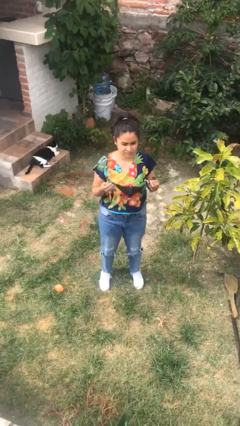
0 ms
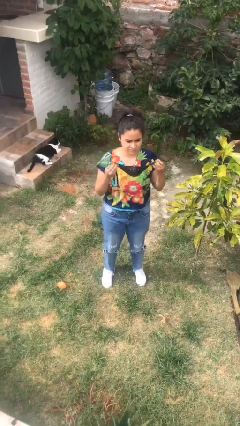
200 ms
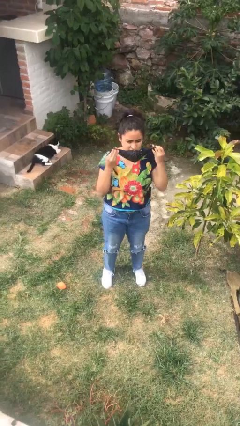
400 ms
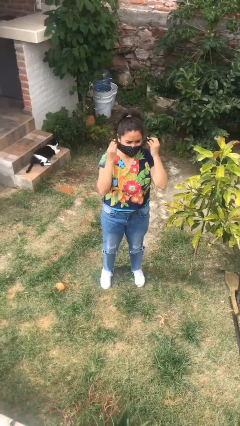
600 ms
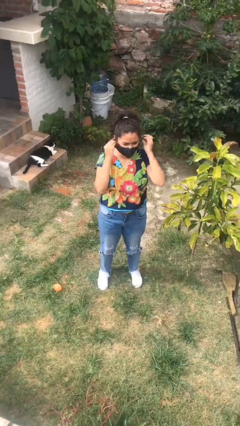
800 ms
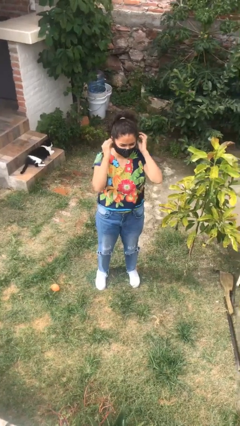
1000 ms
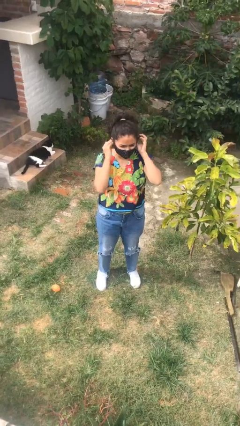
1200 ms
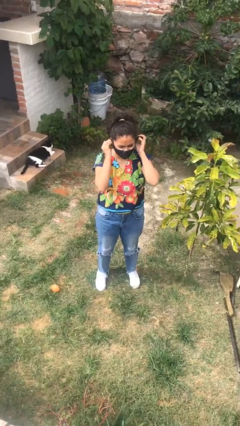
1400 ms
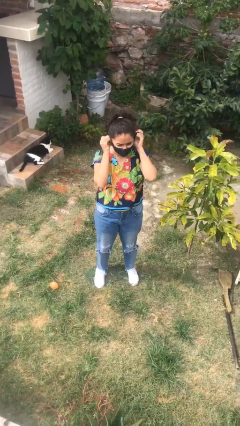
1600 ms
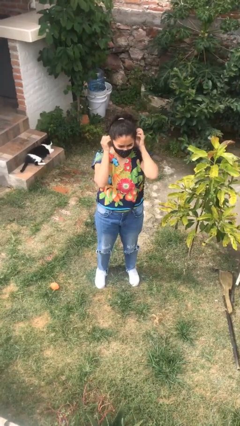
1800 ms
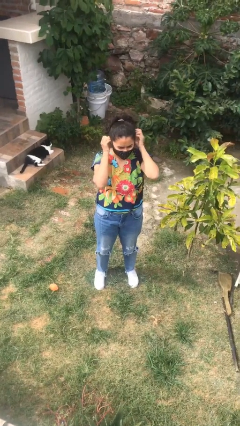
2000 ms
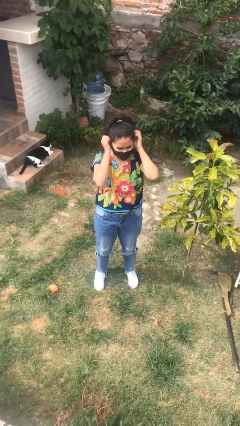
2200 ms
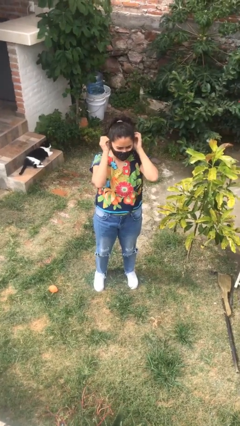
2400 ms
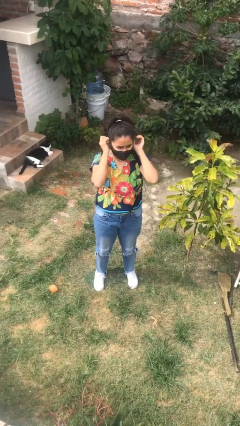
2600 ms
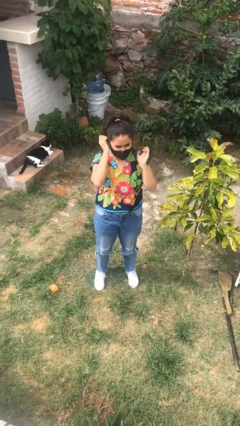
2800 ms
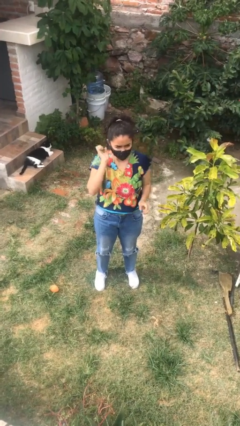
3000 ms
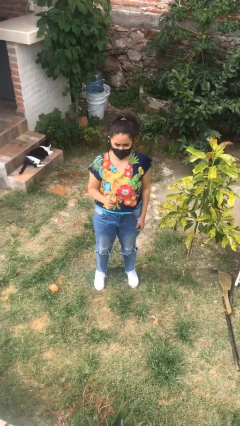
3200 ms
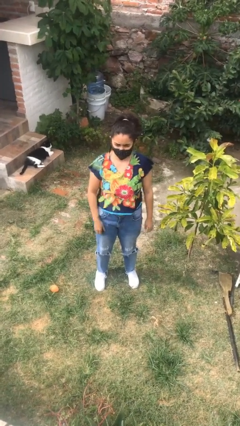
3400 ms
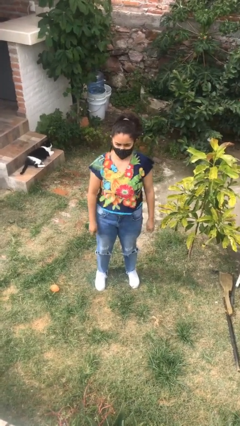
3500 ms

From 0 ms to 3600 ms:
person puts on facemask

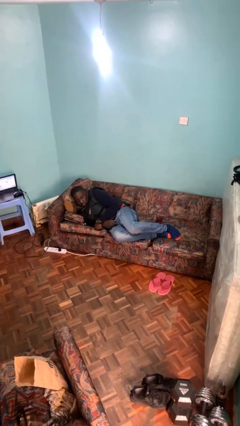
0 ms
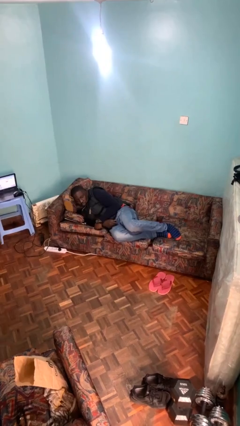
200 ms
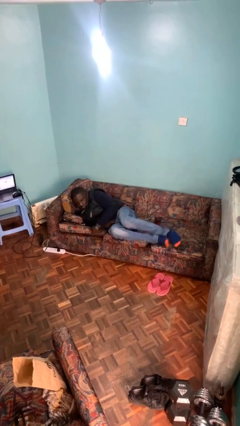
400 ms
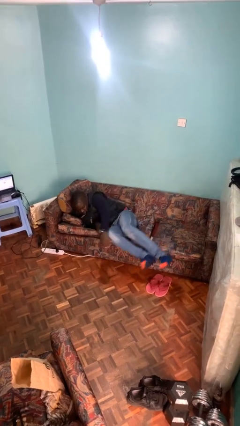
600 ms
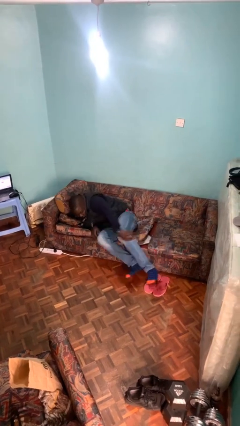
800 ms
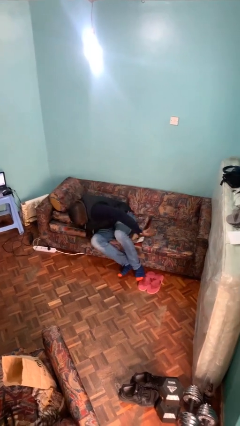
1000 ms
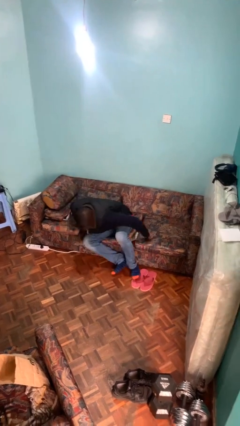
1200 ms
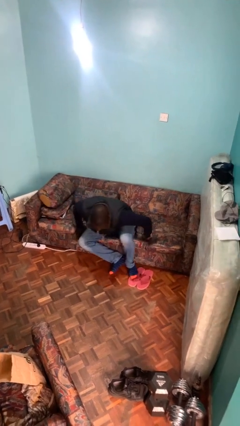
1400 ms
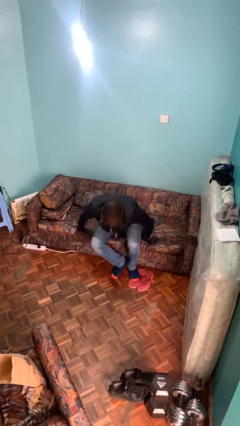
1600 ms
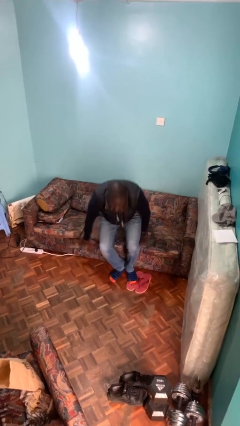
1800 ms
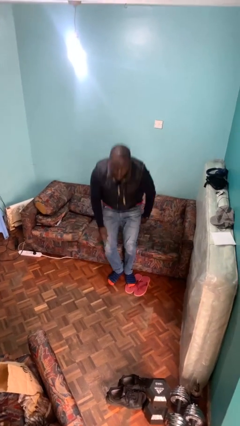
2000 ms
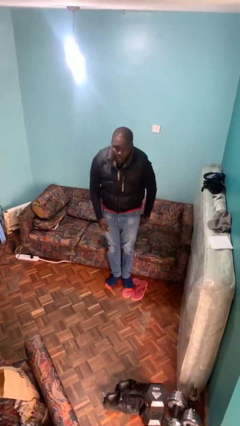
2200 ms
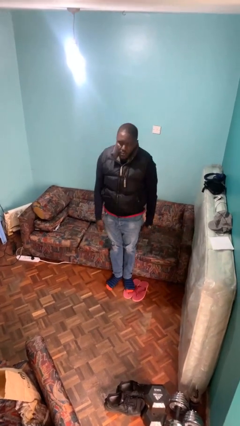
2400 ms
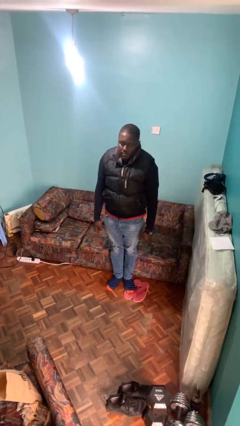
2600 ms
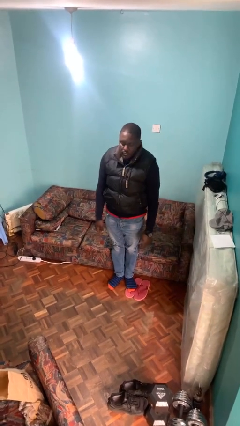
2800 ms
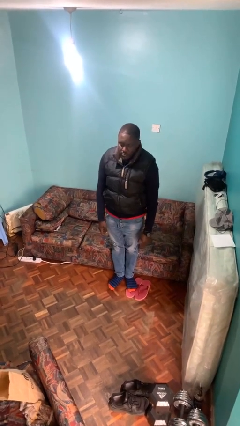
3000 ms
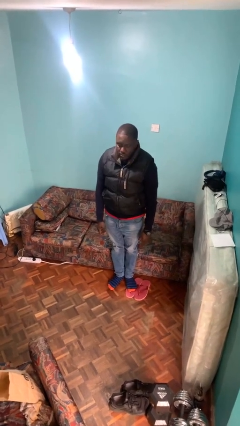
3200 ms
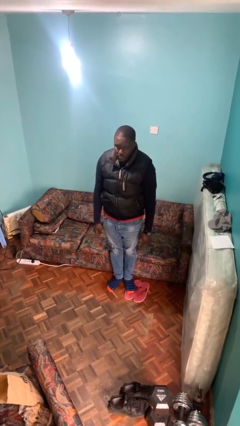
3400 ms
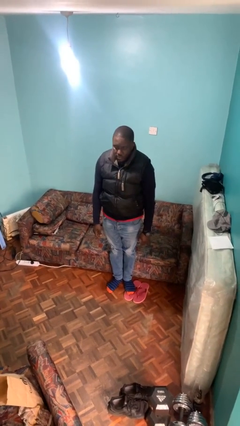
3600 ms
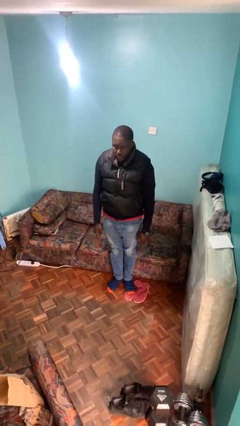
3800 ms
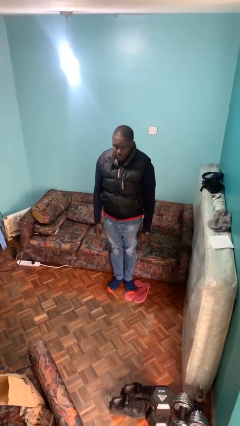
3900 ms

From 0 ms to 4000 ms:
person stands up

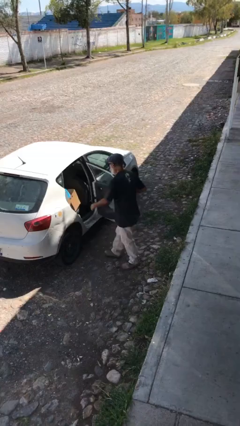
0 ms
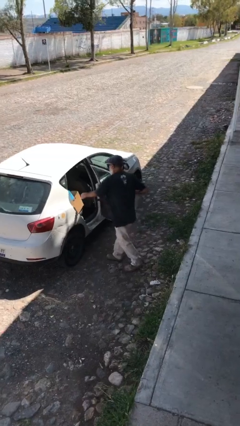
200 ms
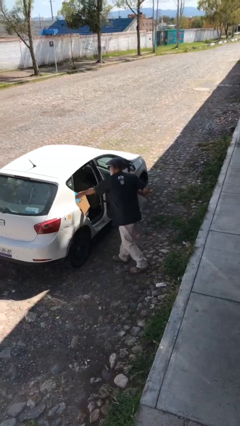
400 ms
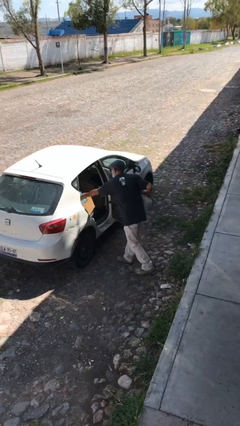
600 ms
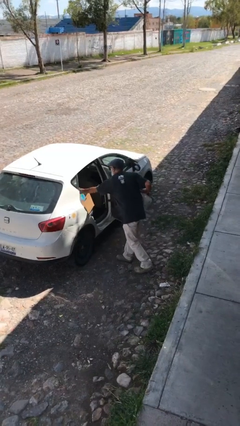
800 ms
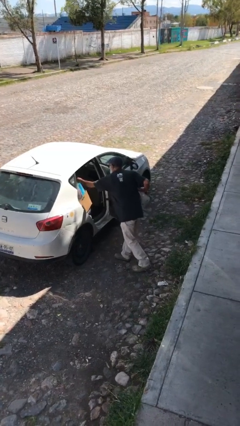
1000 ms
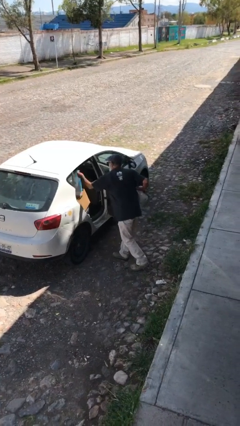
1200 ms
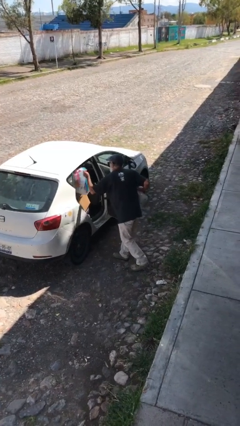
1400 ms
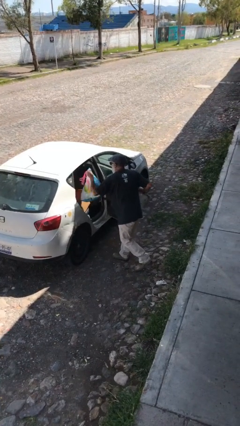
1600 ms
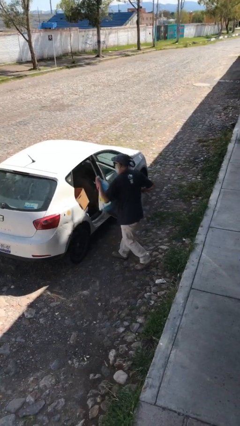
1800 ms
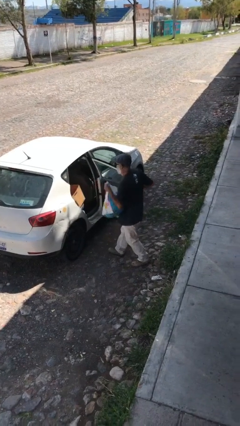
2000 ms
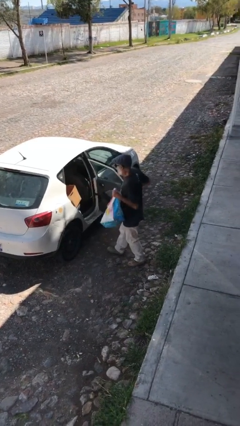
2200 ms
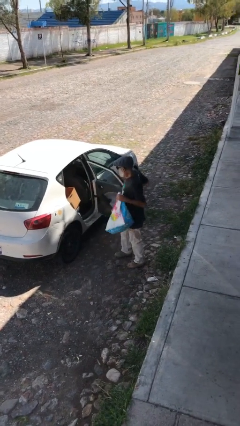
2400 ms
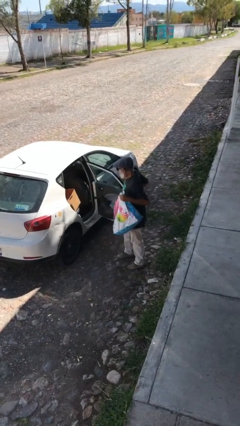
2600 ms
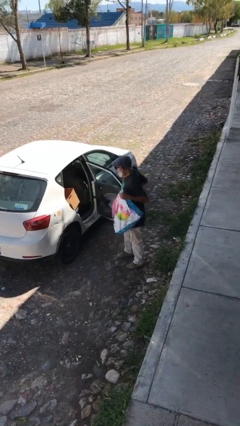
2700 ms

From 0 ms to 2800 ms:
person unloads car

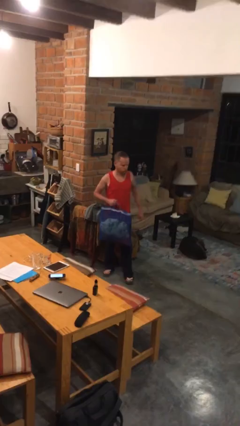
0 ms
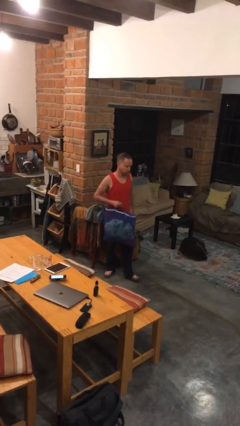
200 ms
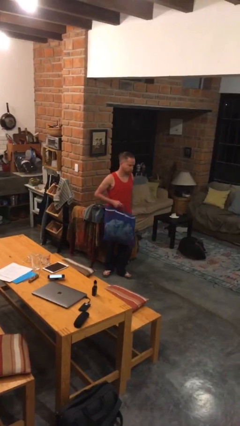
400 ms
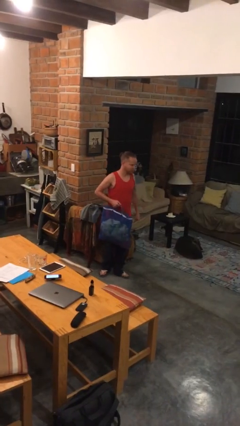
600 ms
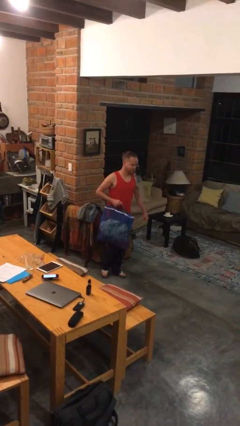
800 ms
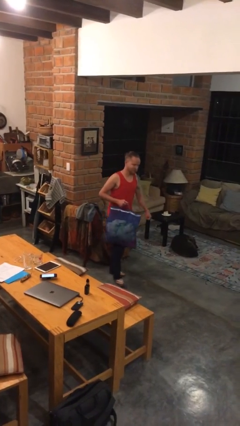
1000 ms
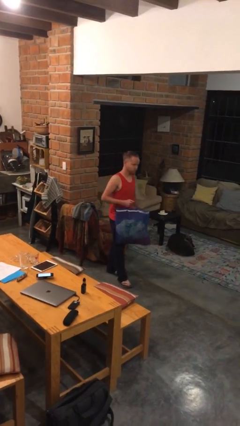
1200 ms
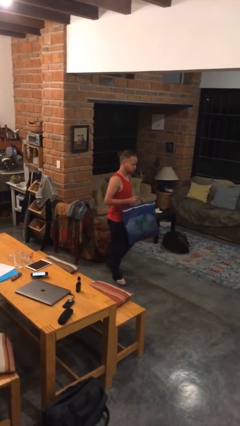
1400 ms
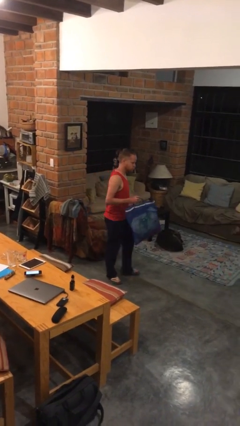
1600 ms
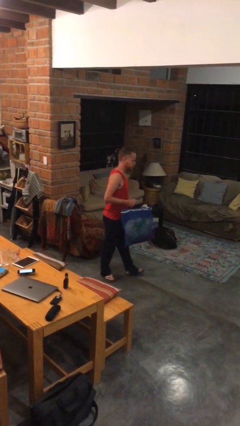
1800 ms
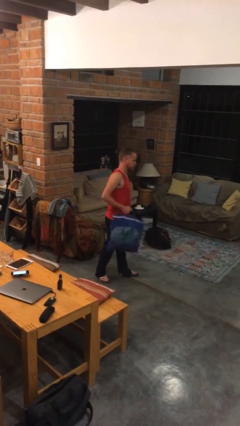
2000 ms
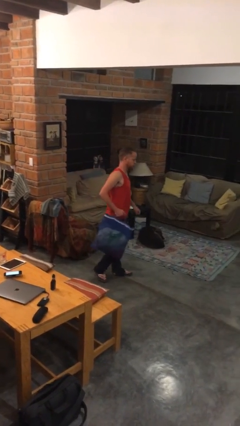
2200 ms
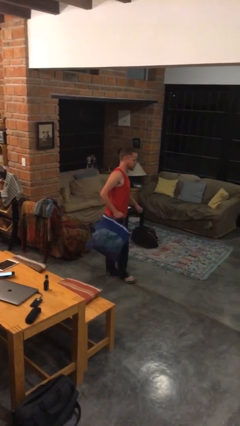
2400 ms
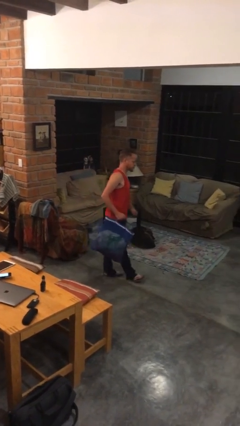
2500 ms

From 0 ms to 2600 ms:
person carries groceries

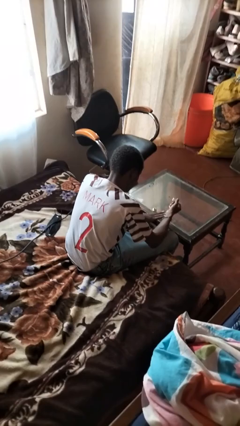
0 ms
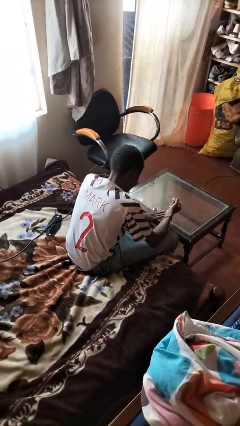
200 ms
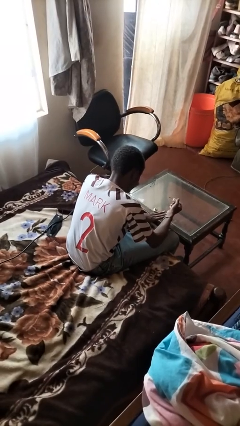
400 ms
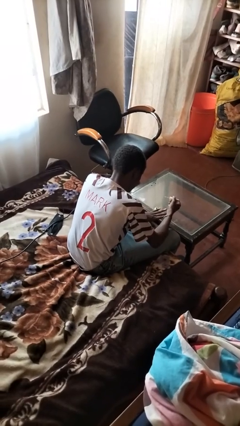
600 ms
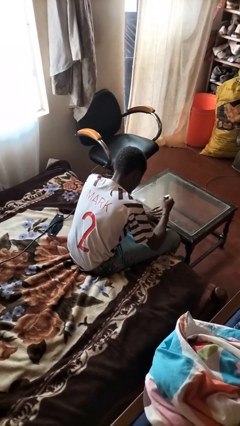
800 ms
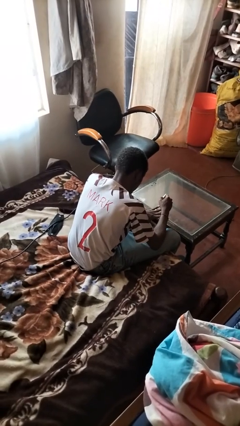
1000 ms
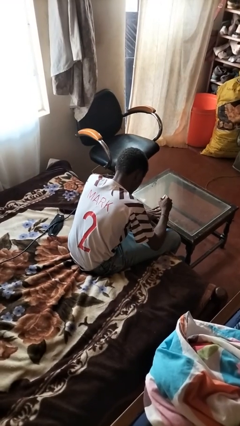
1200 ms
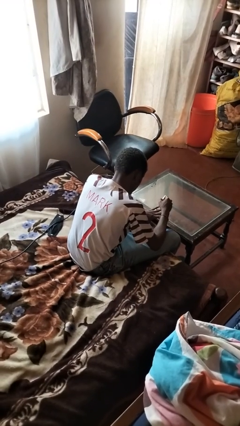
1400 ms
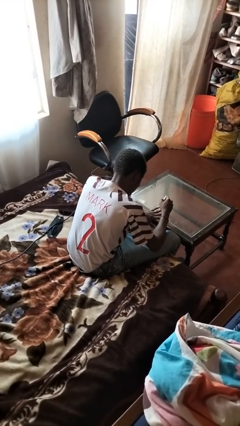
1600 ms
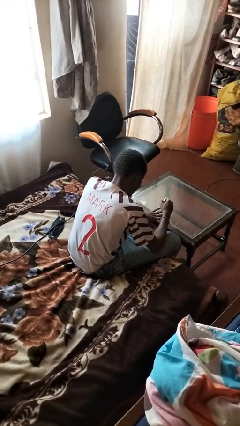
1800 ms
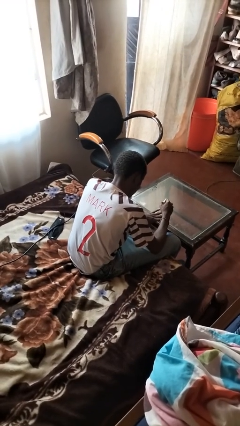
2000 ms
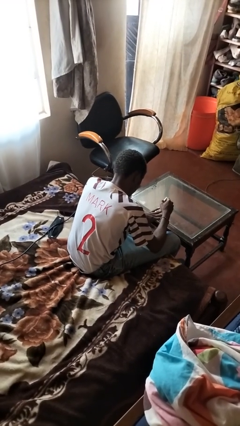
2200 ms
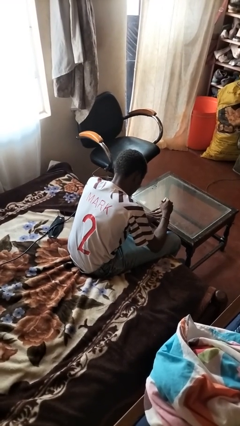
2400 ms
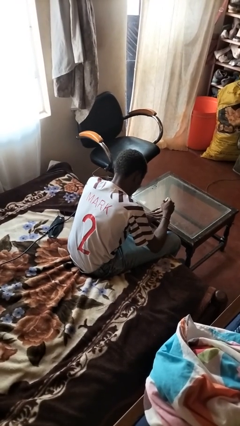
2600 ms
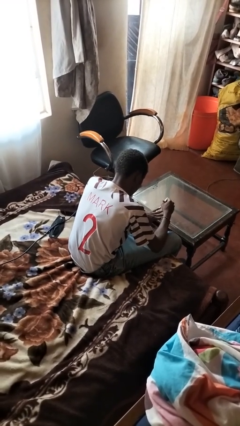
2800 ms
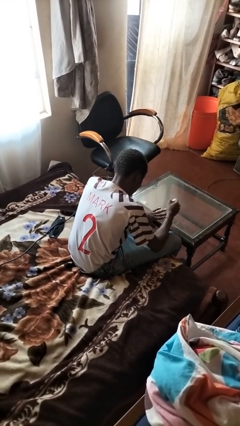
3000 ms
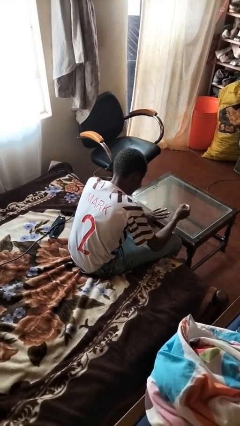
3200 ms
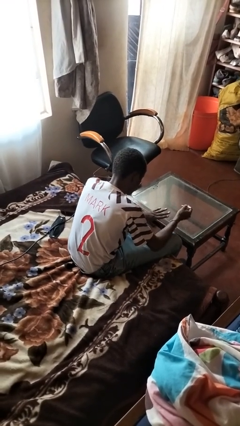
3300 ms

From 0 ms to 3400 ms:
person paints fingernails

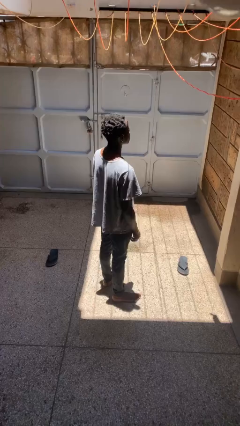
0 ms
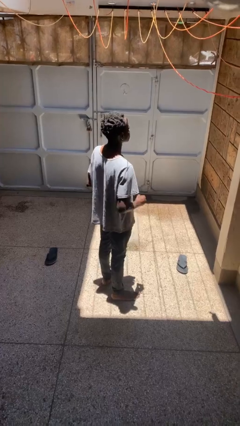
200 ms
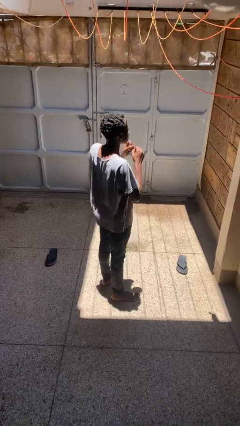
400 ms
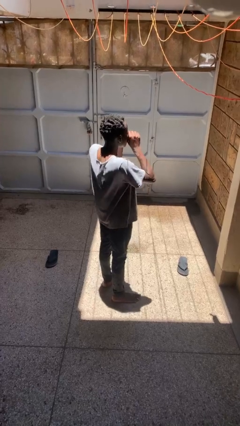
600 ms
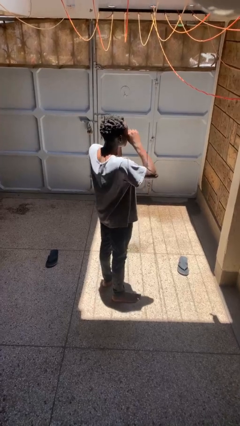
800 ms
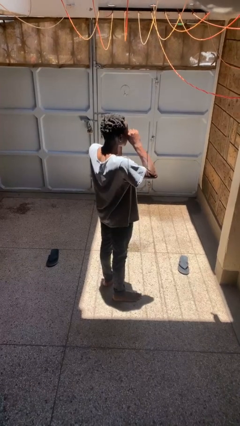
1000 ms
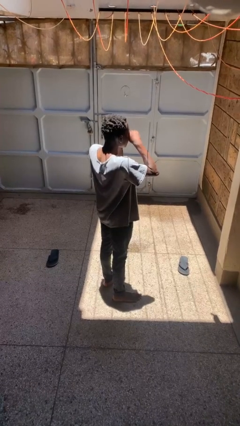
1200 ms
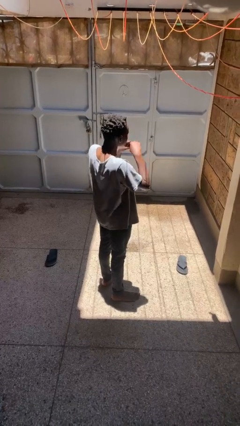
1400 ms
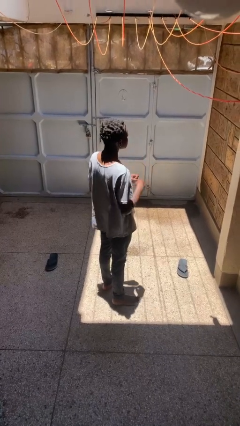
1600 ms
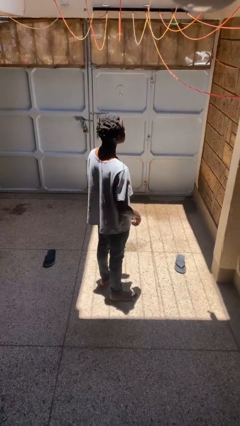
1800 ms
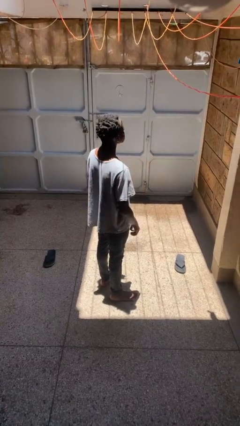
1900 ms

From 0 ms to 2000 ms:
person rubs eyes
